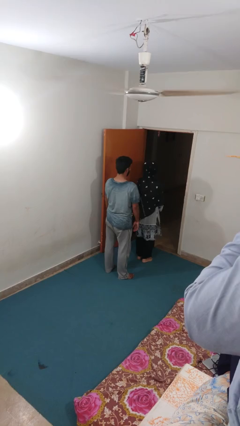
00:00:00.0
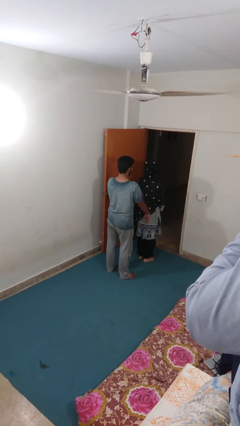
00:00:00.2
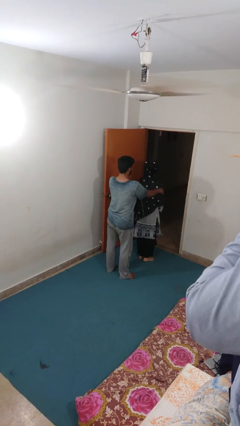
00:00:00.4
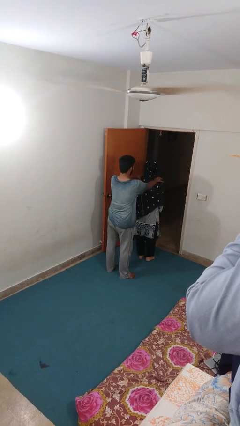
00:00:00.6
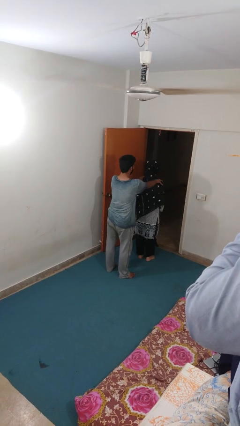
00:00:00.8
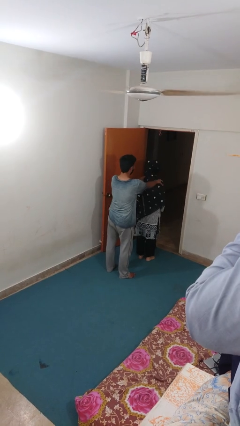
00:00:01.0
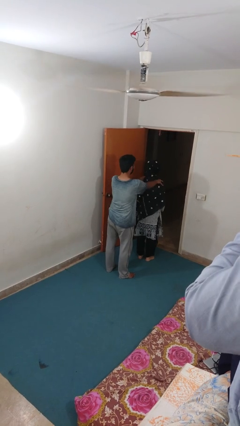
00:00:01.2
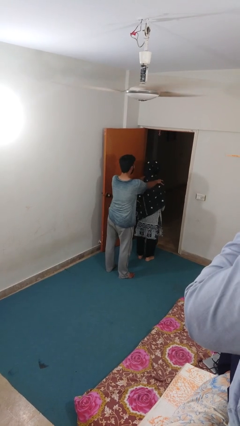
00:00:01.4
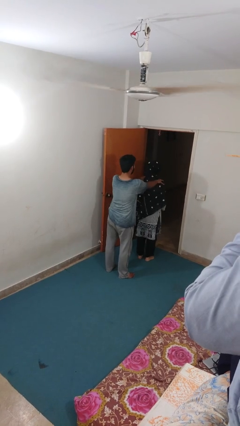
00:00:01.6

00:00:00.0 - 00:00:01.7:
person grabs person by shoulder

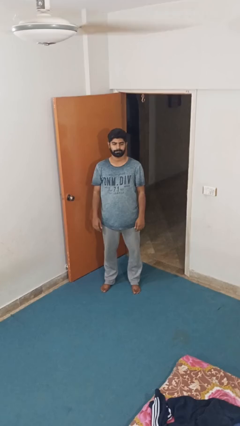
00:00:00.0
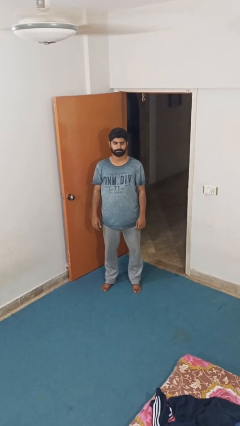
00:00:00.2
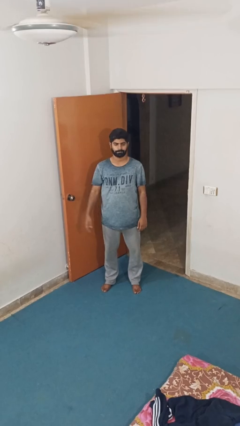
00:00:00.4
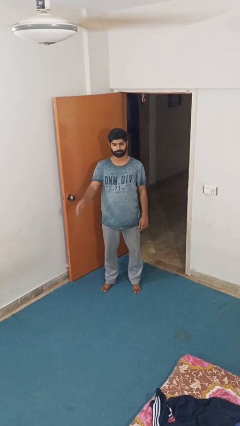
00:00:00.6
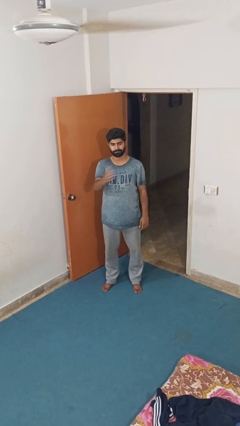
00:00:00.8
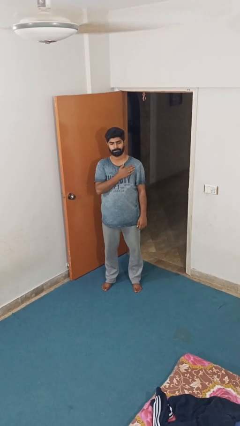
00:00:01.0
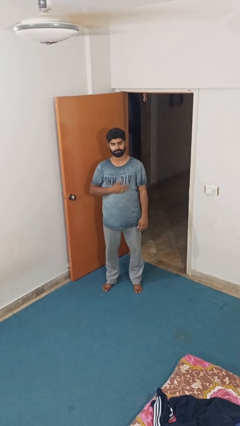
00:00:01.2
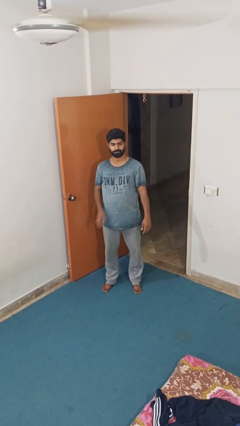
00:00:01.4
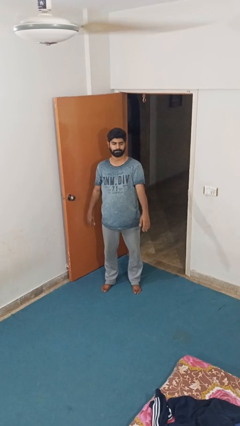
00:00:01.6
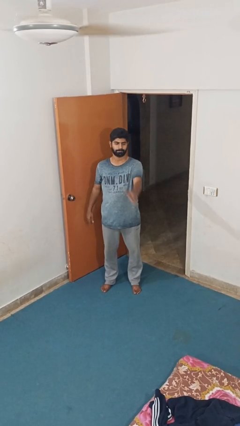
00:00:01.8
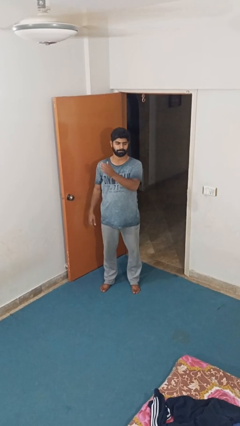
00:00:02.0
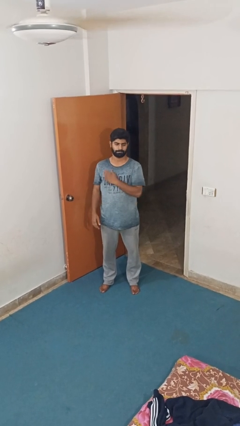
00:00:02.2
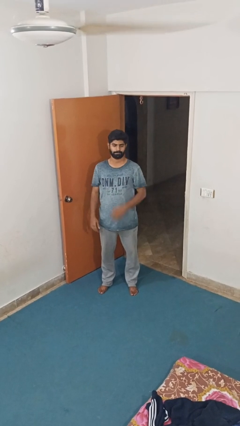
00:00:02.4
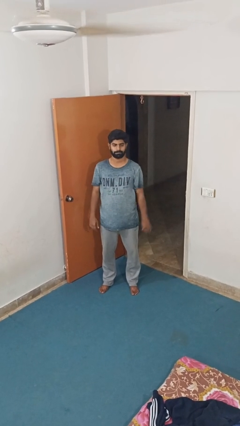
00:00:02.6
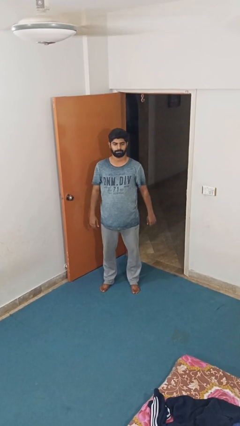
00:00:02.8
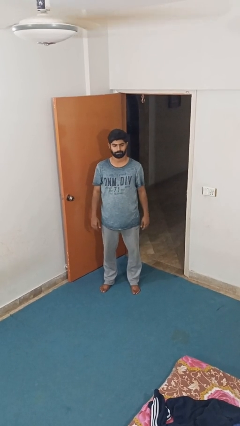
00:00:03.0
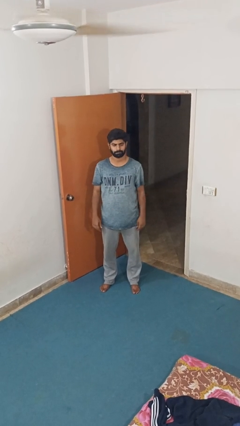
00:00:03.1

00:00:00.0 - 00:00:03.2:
person drums on chest

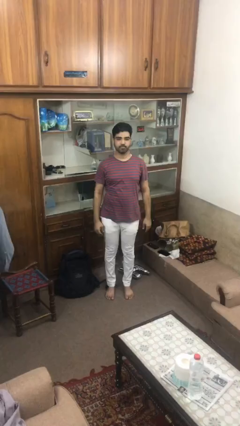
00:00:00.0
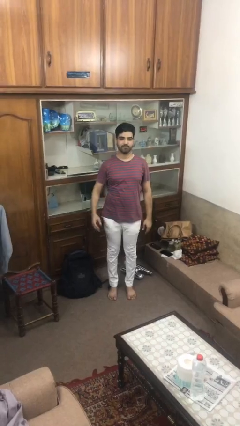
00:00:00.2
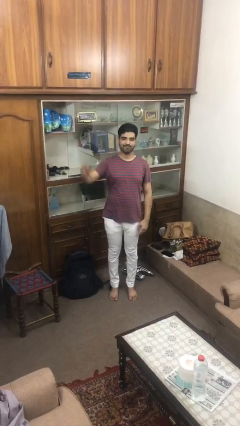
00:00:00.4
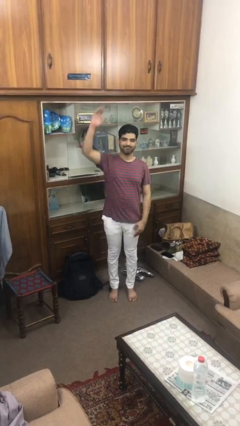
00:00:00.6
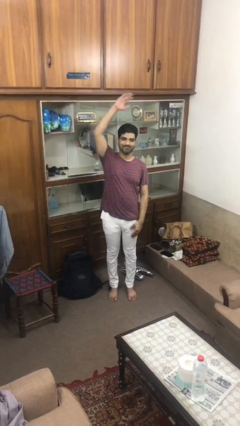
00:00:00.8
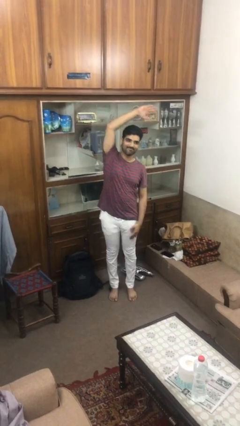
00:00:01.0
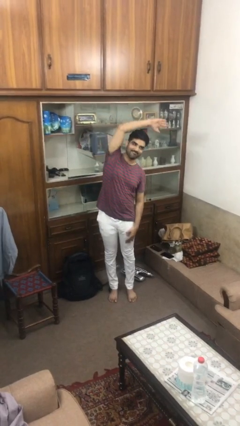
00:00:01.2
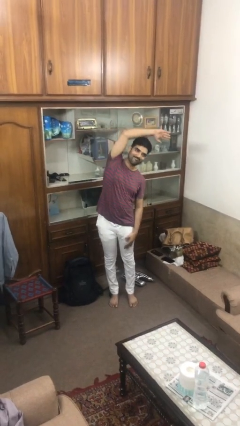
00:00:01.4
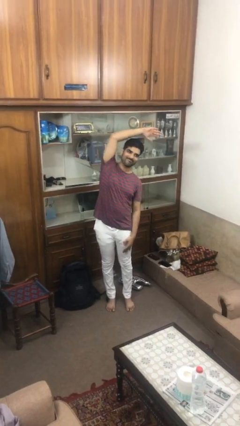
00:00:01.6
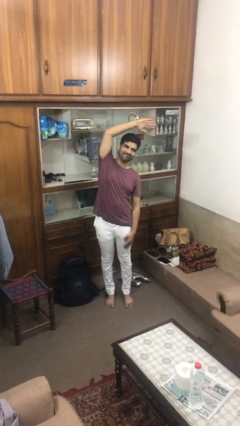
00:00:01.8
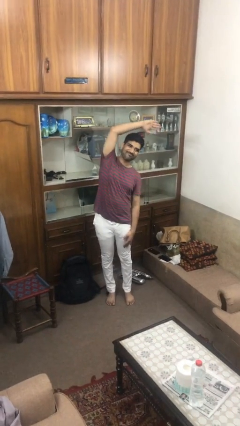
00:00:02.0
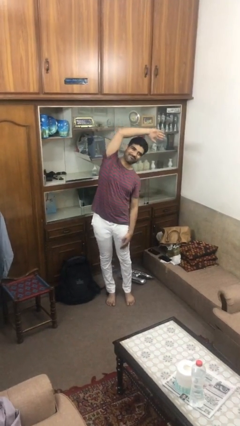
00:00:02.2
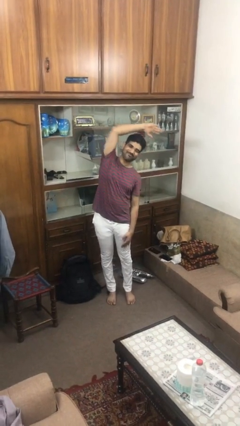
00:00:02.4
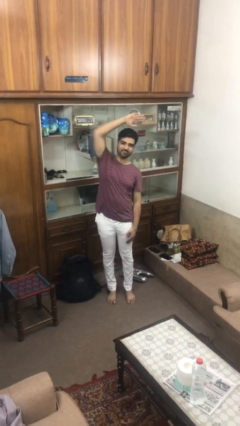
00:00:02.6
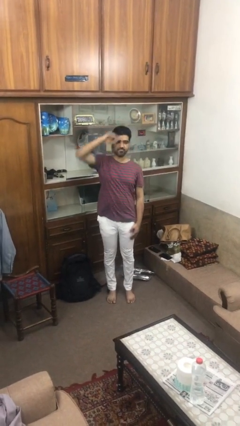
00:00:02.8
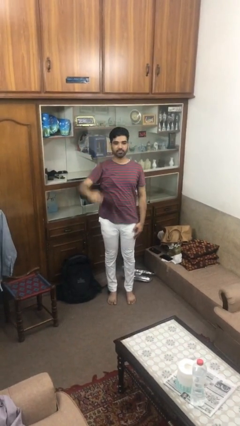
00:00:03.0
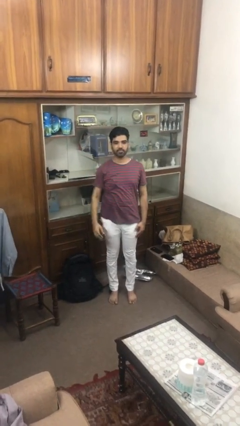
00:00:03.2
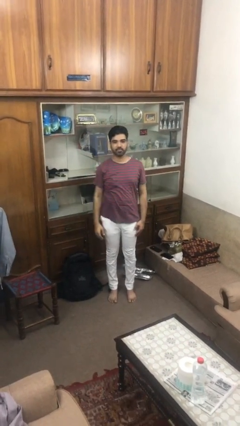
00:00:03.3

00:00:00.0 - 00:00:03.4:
person stretches arms over head

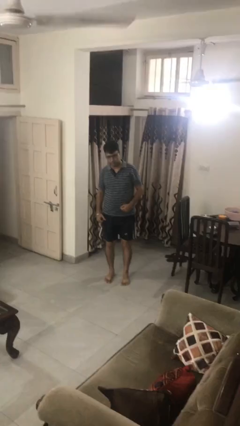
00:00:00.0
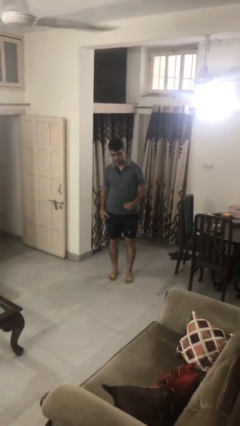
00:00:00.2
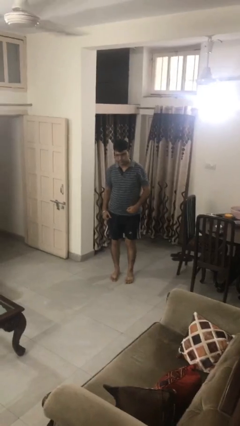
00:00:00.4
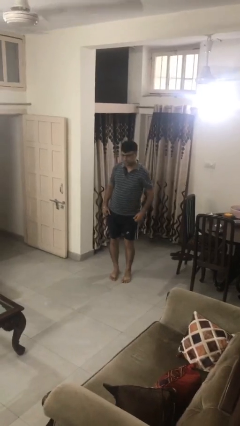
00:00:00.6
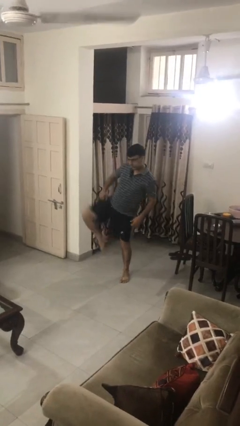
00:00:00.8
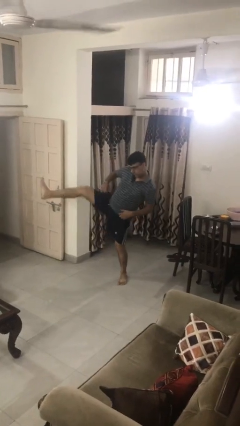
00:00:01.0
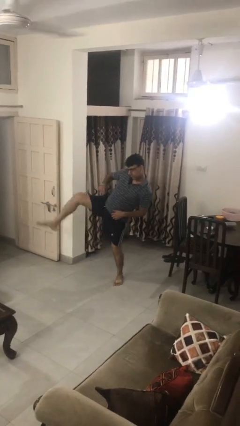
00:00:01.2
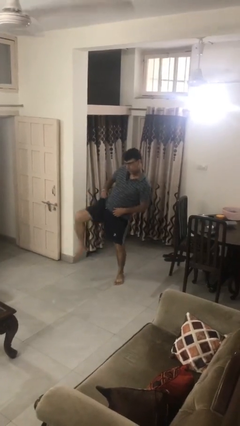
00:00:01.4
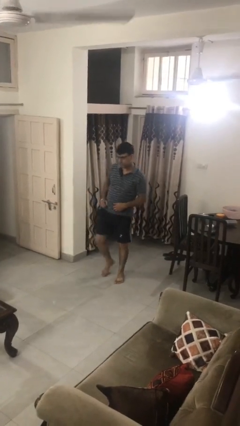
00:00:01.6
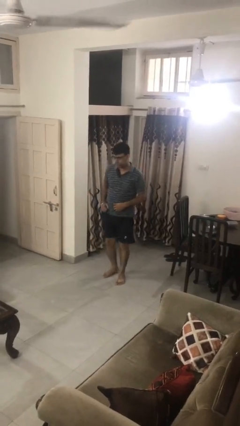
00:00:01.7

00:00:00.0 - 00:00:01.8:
person karate kicks

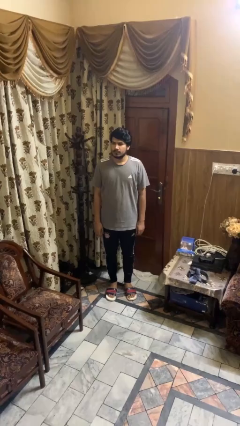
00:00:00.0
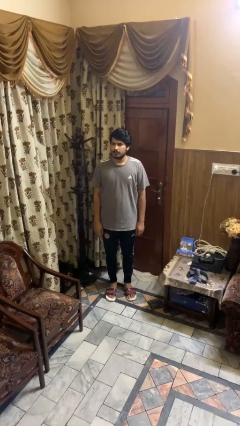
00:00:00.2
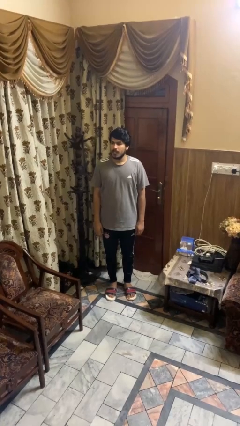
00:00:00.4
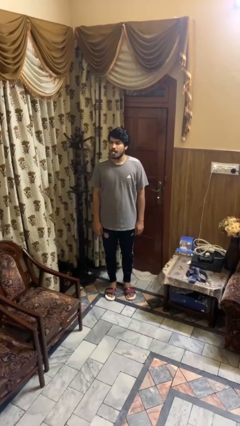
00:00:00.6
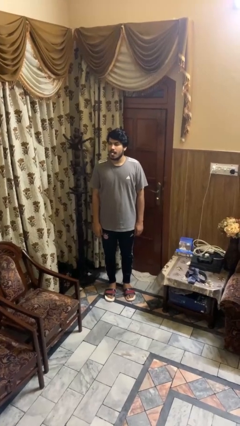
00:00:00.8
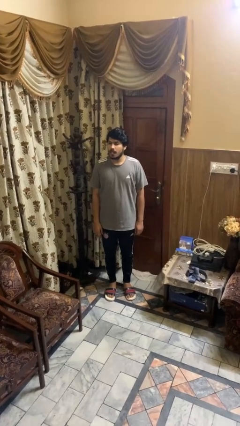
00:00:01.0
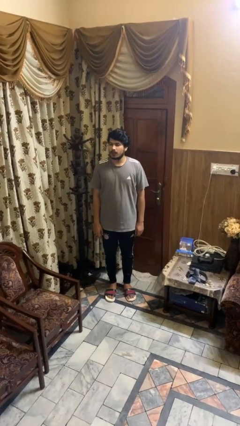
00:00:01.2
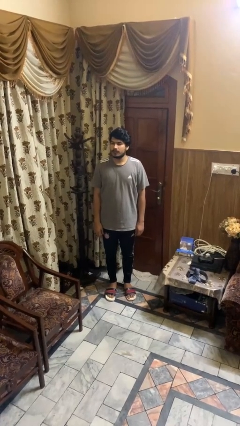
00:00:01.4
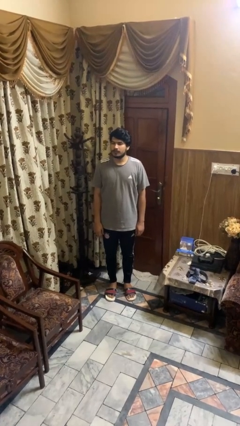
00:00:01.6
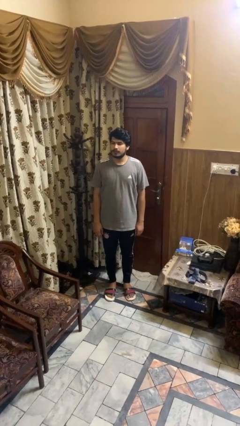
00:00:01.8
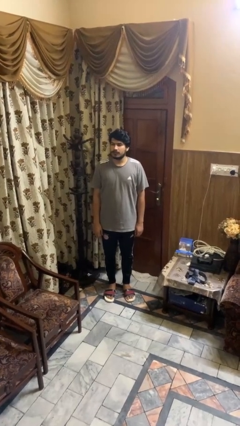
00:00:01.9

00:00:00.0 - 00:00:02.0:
person sticks out tongue

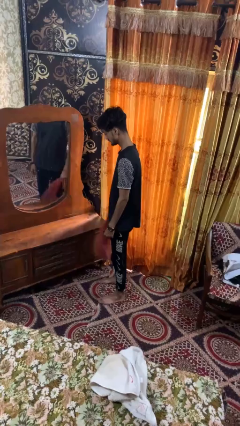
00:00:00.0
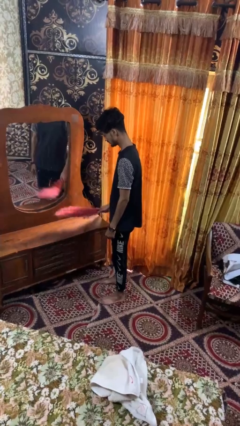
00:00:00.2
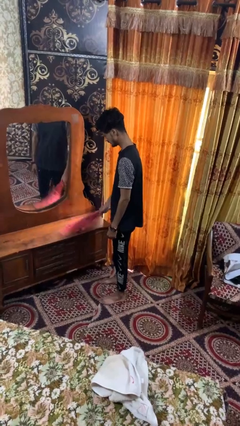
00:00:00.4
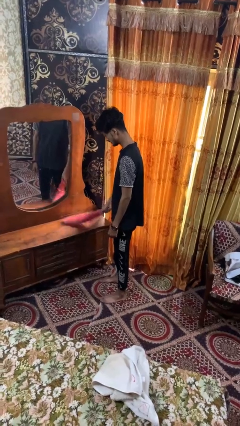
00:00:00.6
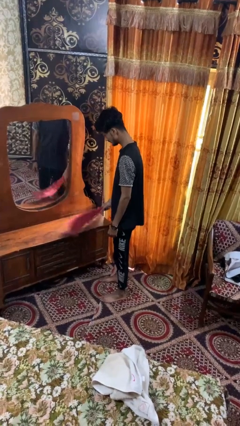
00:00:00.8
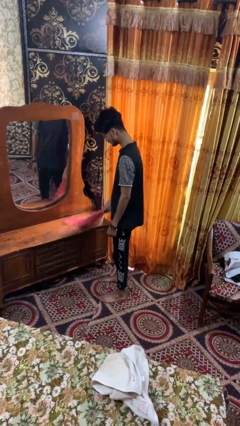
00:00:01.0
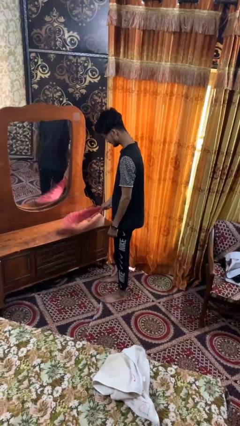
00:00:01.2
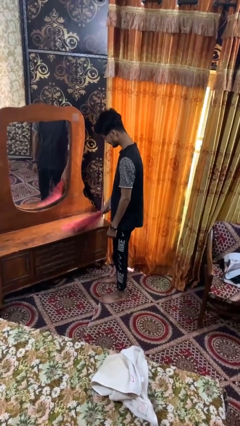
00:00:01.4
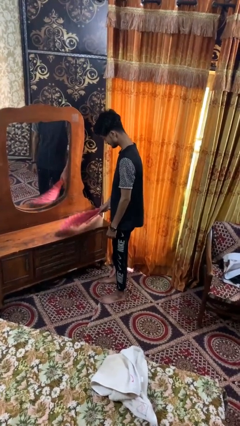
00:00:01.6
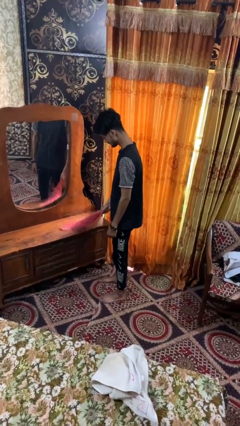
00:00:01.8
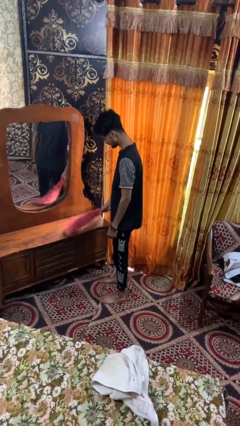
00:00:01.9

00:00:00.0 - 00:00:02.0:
person dusts furniture

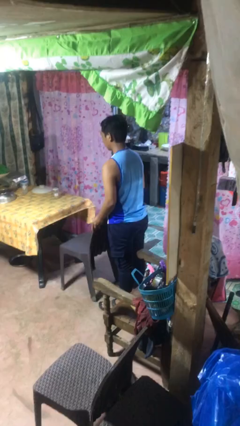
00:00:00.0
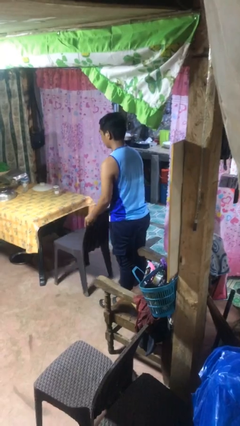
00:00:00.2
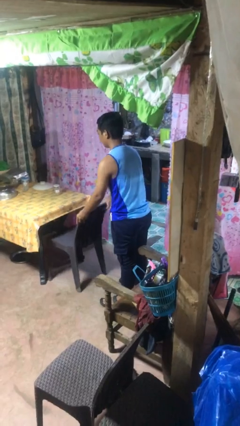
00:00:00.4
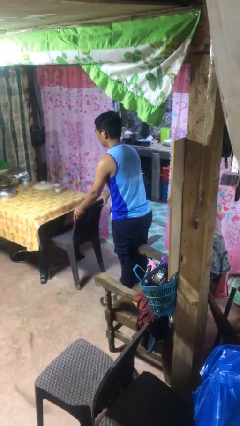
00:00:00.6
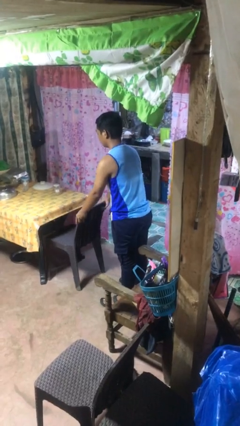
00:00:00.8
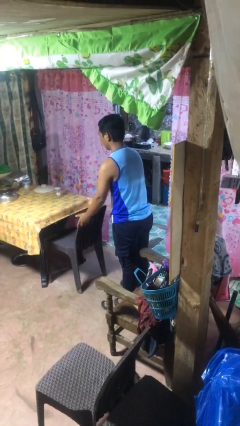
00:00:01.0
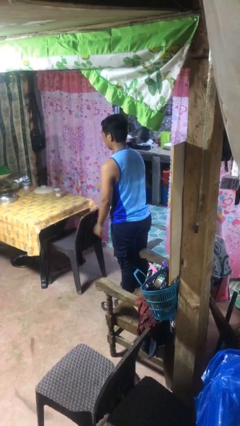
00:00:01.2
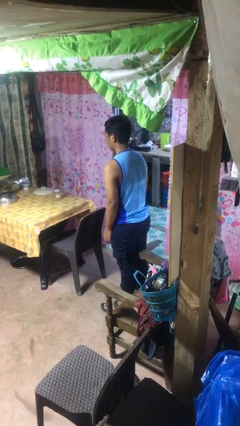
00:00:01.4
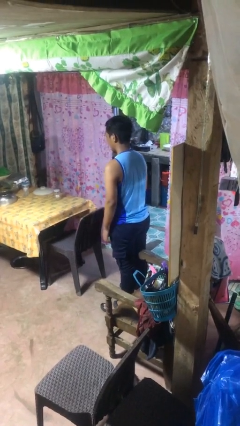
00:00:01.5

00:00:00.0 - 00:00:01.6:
person pushes in chair

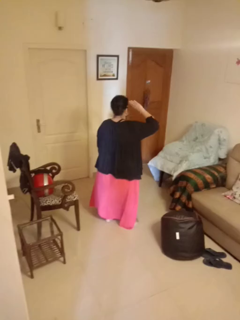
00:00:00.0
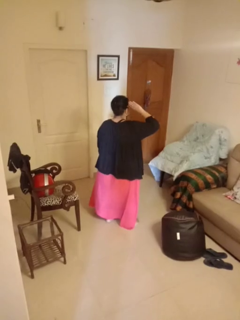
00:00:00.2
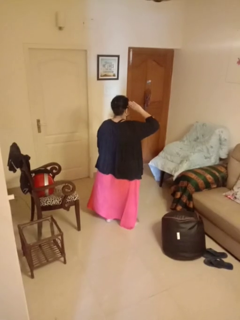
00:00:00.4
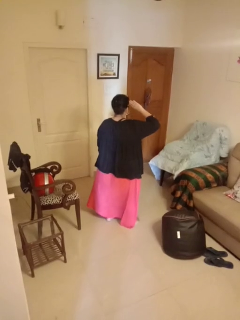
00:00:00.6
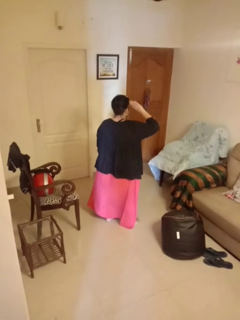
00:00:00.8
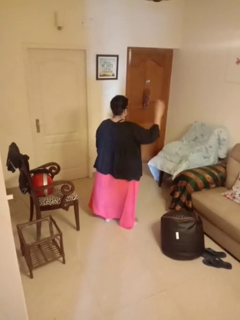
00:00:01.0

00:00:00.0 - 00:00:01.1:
person salutes

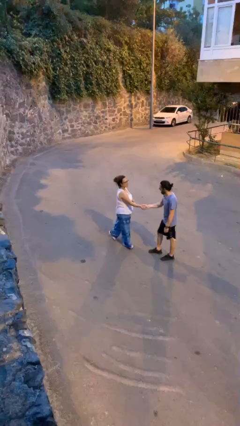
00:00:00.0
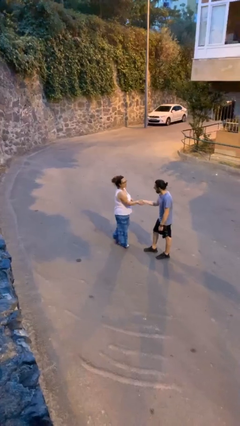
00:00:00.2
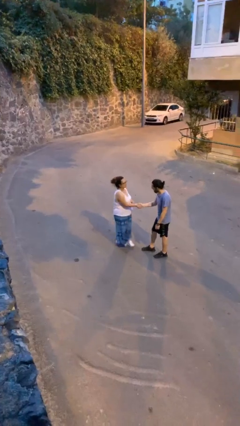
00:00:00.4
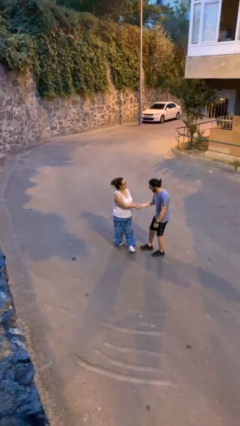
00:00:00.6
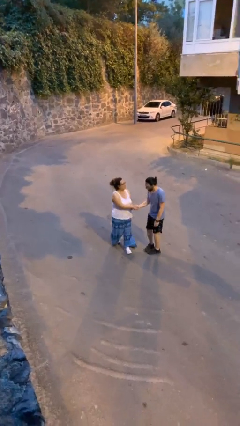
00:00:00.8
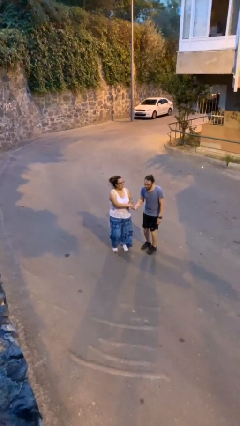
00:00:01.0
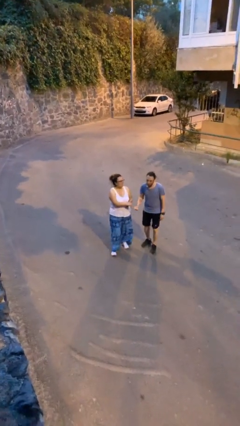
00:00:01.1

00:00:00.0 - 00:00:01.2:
person shakes hand
